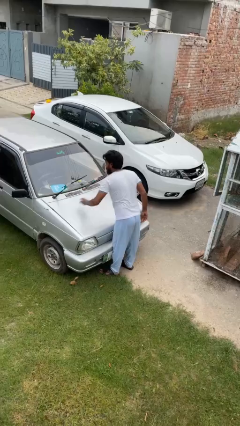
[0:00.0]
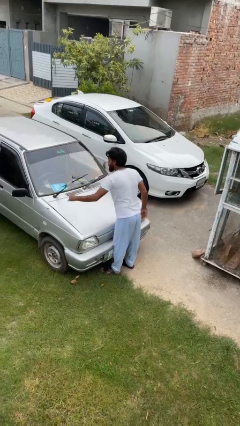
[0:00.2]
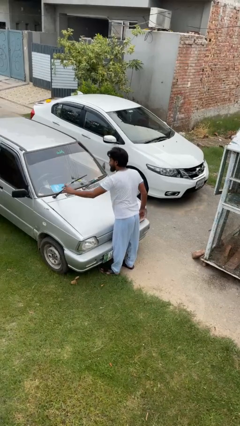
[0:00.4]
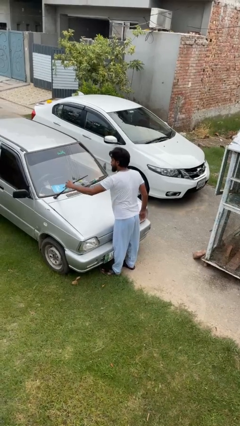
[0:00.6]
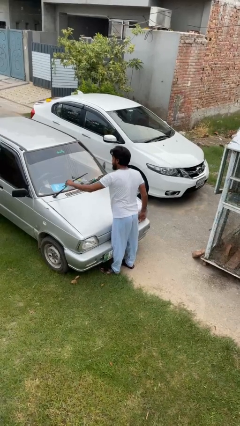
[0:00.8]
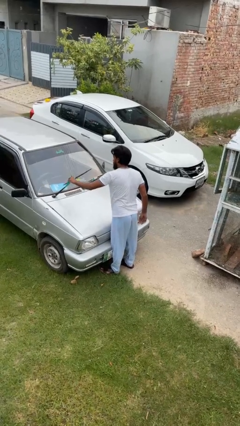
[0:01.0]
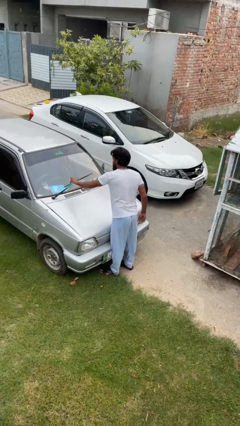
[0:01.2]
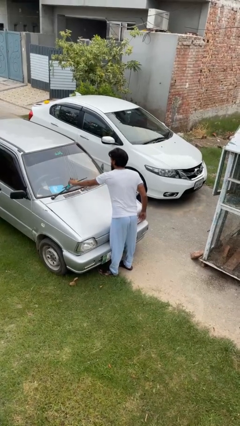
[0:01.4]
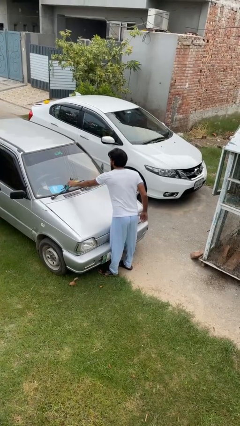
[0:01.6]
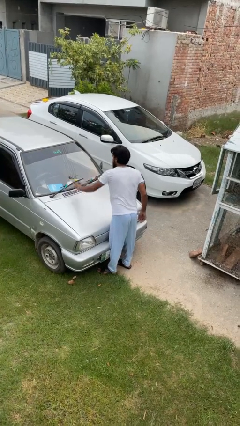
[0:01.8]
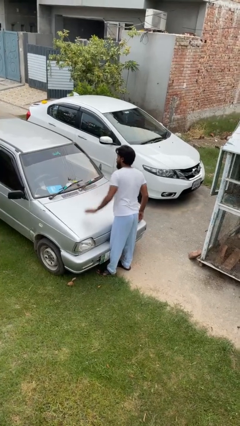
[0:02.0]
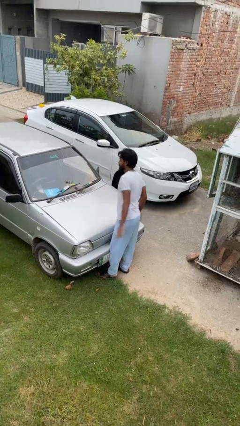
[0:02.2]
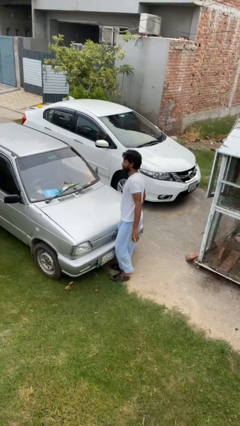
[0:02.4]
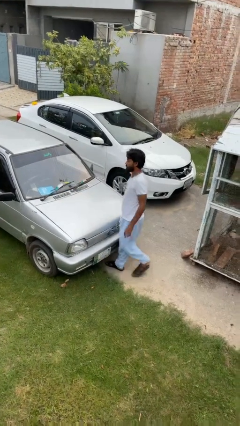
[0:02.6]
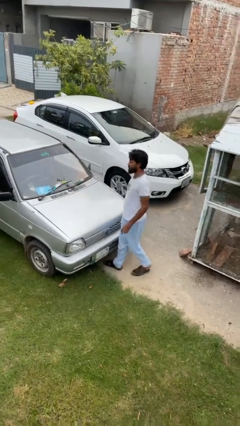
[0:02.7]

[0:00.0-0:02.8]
person flips down car wipers

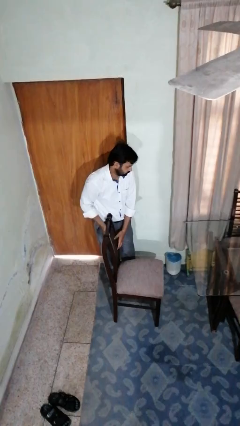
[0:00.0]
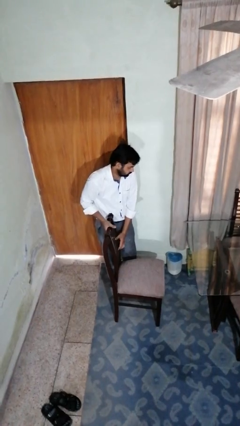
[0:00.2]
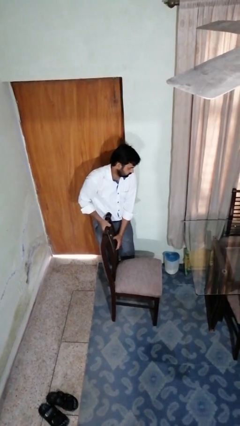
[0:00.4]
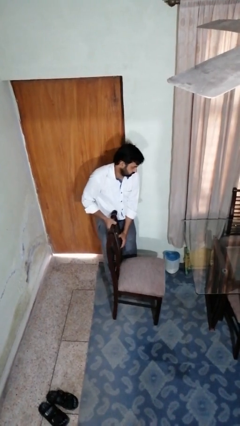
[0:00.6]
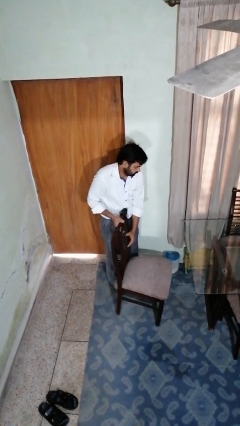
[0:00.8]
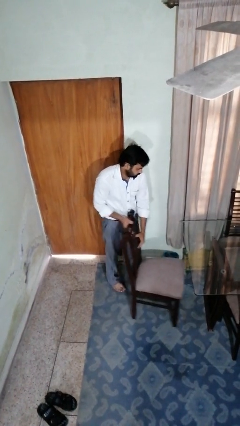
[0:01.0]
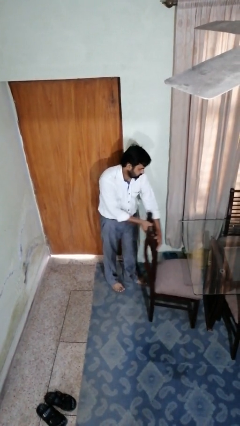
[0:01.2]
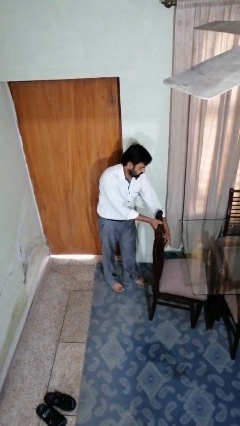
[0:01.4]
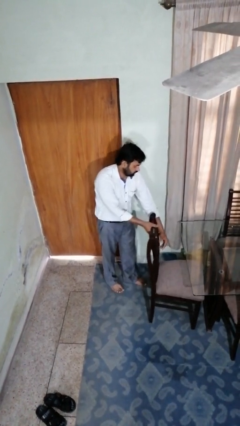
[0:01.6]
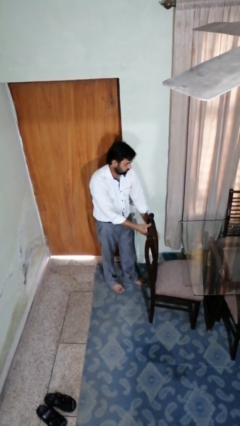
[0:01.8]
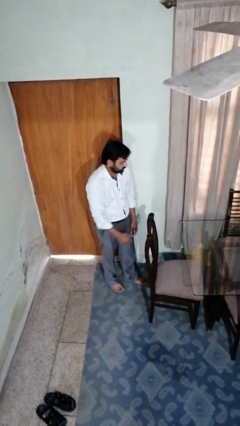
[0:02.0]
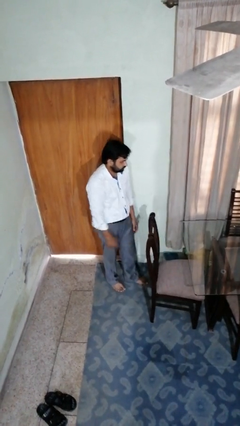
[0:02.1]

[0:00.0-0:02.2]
person pushes in chair

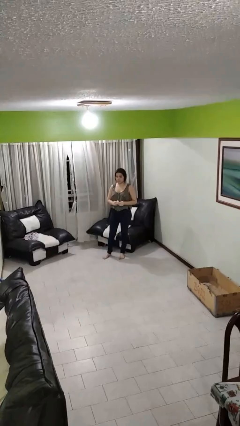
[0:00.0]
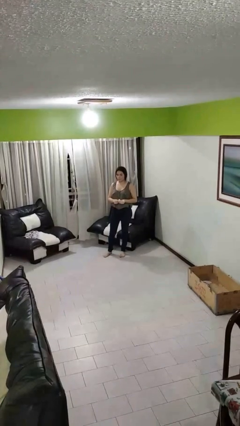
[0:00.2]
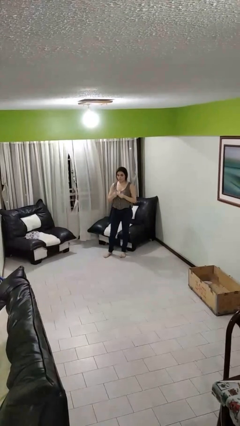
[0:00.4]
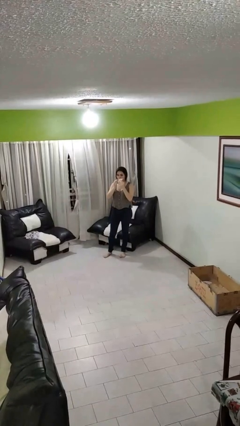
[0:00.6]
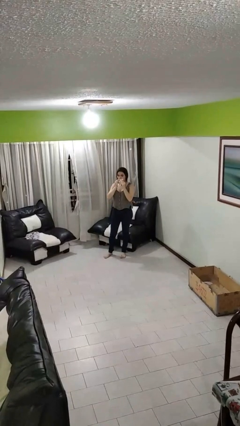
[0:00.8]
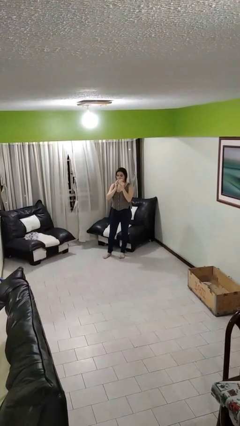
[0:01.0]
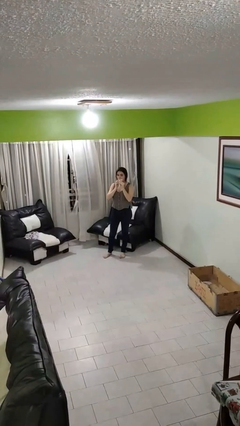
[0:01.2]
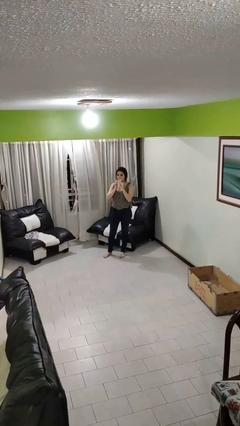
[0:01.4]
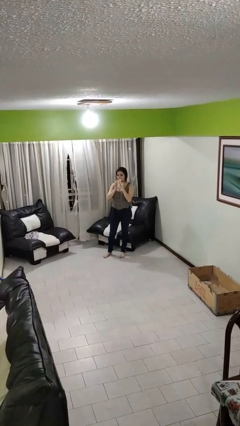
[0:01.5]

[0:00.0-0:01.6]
person wipes mouth with napkin

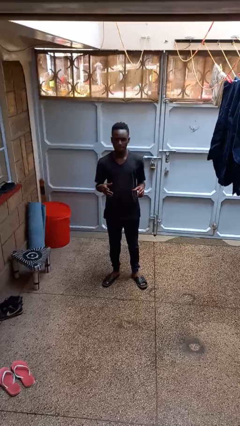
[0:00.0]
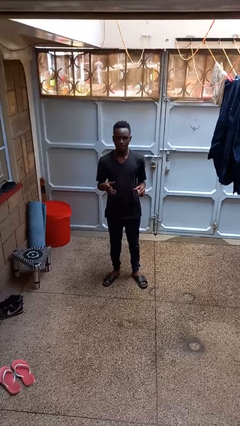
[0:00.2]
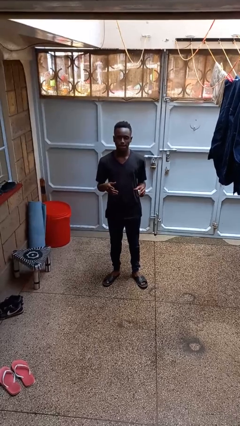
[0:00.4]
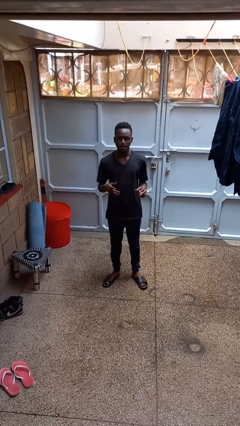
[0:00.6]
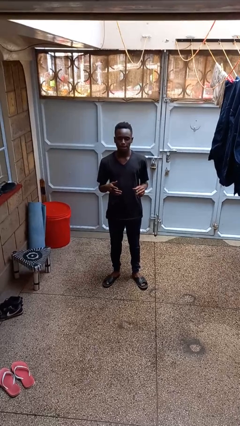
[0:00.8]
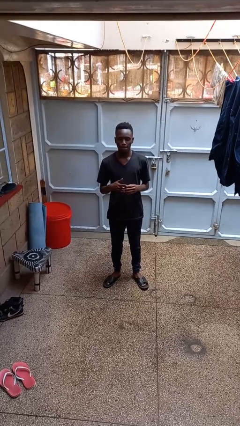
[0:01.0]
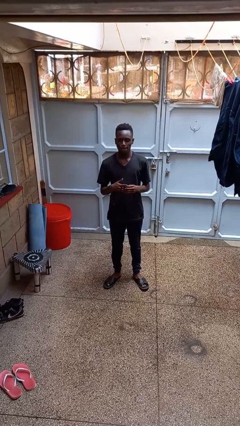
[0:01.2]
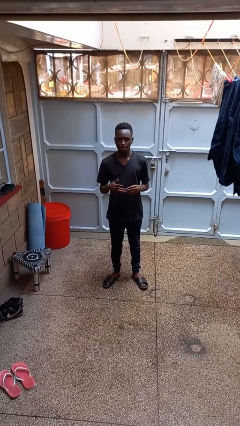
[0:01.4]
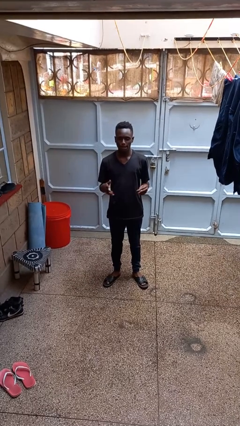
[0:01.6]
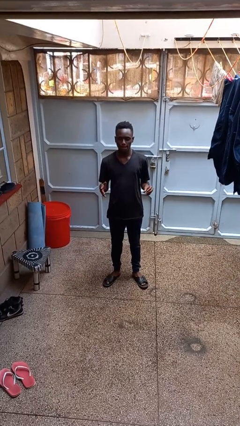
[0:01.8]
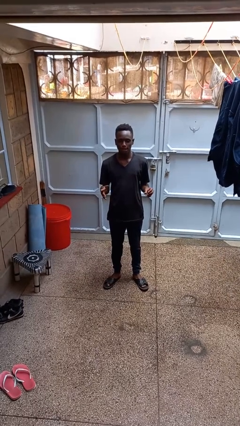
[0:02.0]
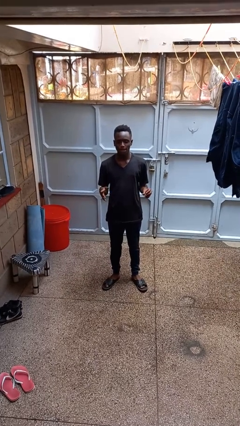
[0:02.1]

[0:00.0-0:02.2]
person takes off ring

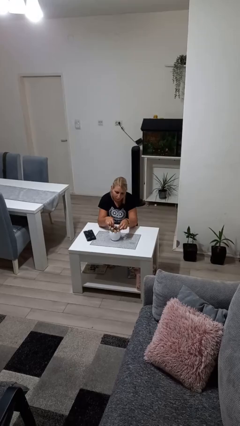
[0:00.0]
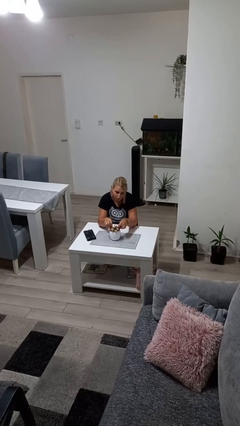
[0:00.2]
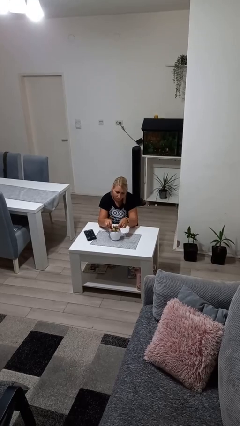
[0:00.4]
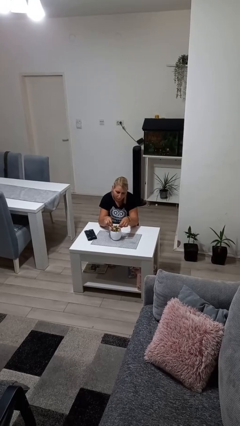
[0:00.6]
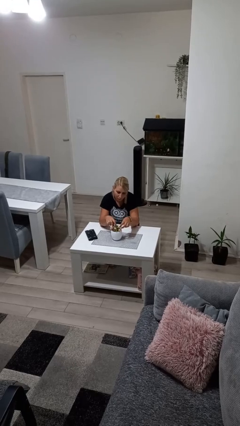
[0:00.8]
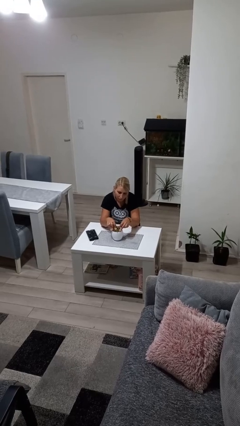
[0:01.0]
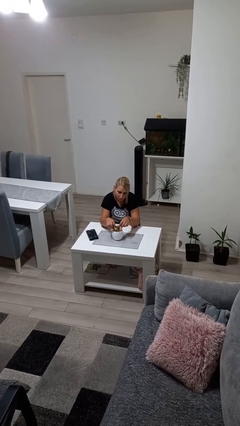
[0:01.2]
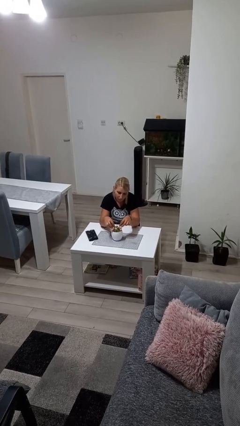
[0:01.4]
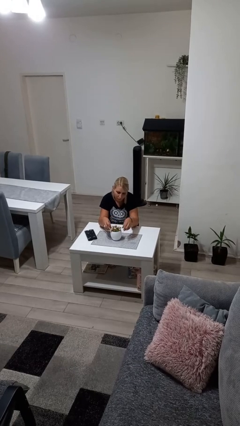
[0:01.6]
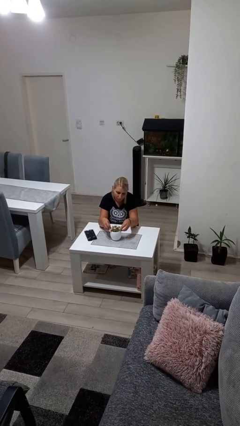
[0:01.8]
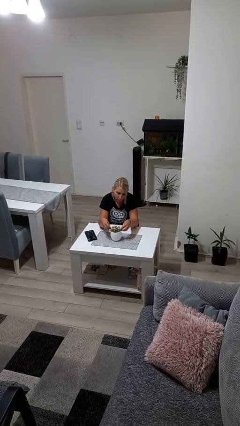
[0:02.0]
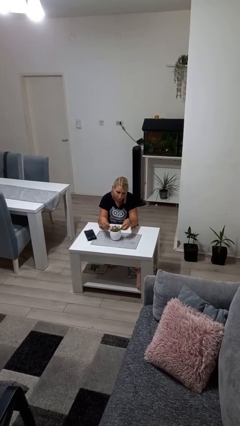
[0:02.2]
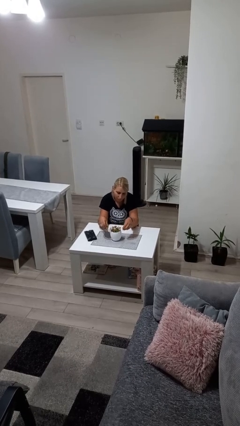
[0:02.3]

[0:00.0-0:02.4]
person arranges flowers in vase

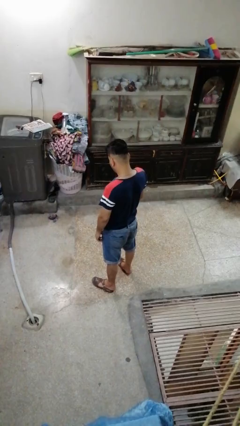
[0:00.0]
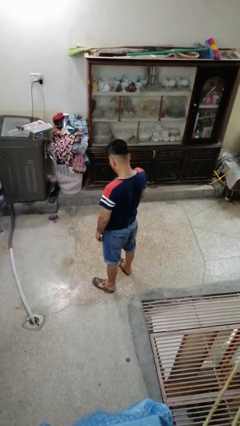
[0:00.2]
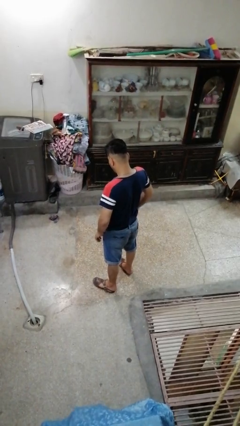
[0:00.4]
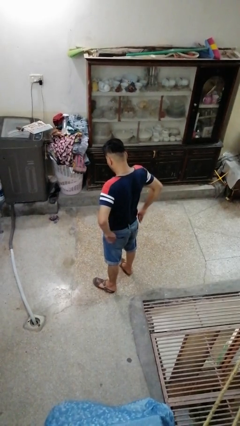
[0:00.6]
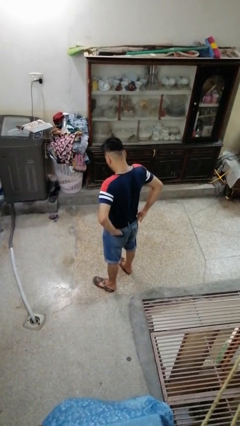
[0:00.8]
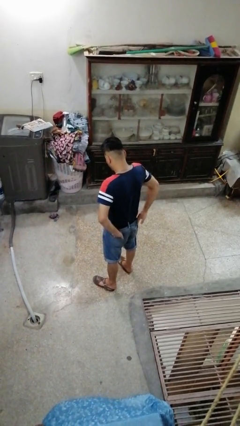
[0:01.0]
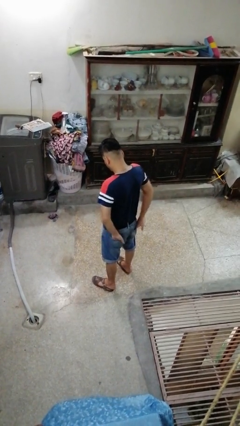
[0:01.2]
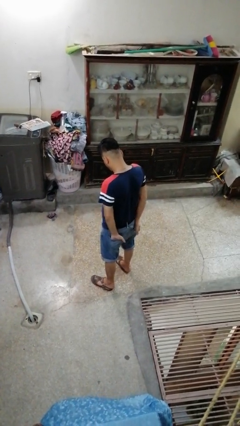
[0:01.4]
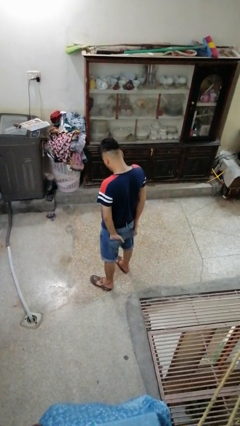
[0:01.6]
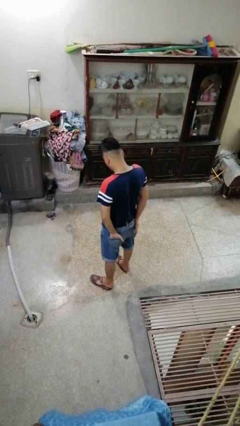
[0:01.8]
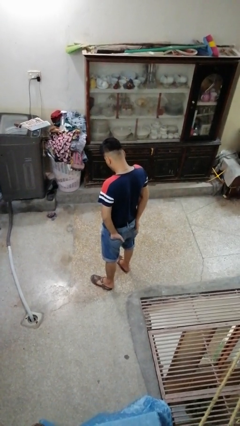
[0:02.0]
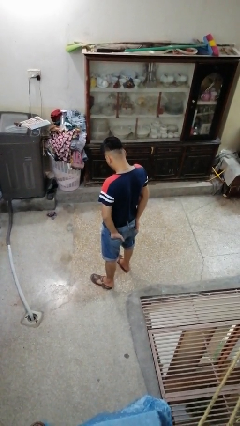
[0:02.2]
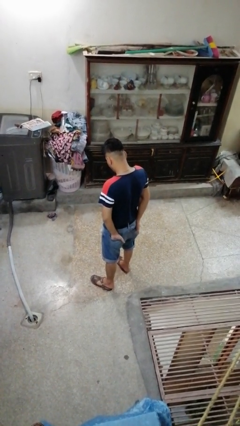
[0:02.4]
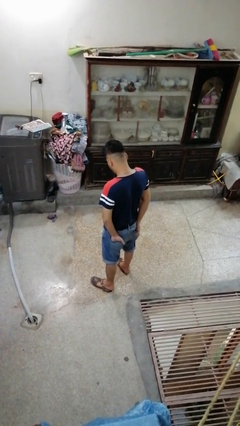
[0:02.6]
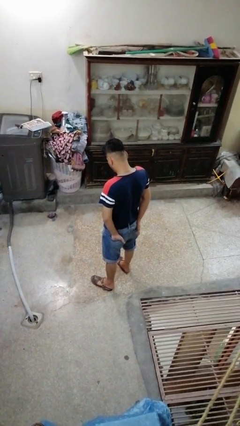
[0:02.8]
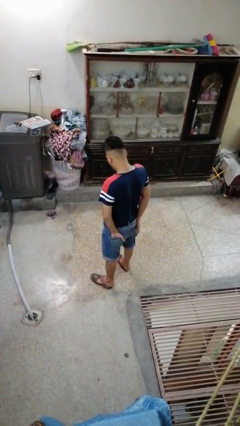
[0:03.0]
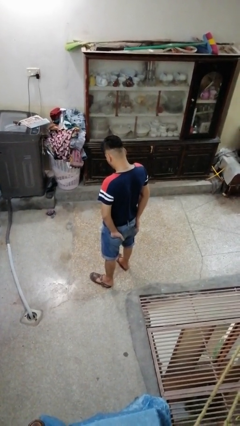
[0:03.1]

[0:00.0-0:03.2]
person puts hands in back pockets

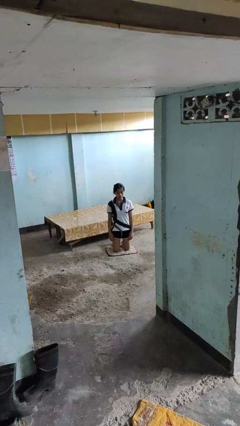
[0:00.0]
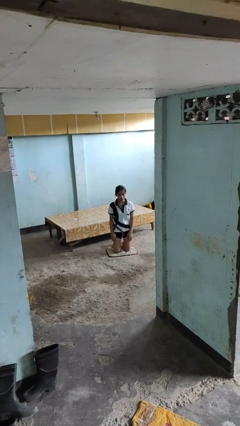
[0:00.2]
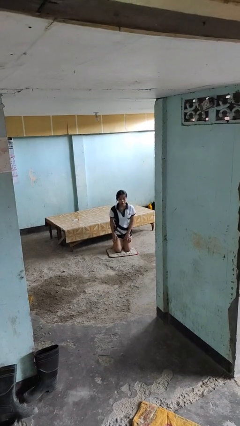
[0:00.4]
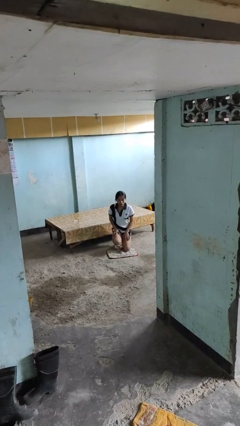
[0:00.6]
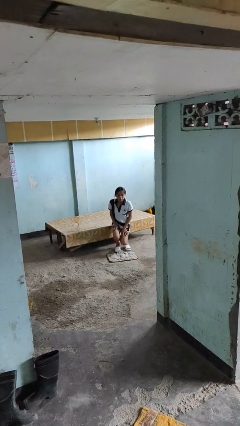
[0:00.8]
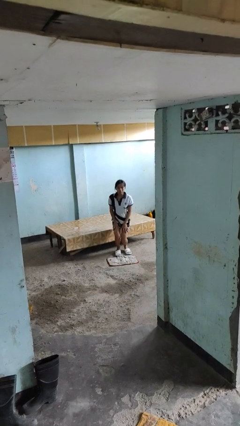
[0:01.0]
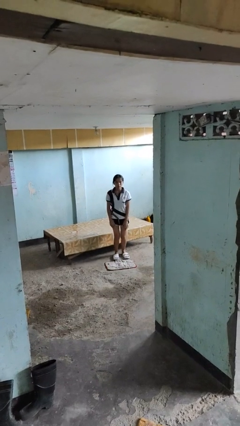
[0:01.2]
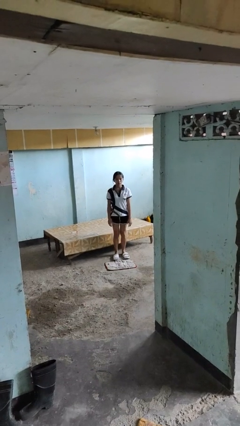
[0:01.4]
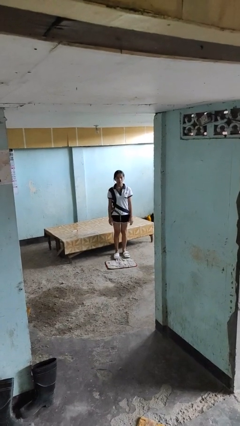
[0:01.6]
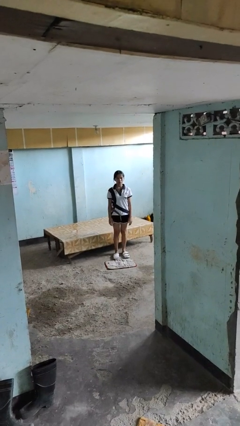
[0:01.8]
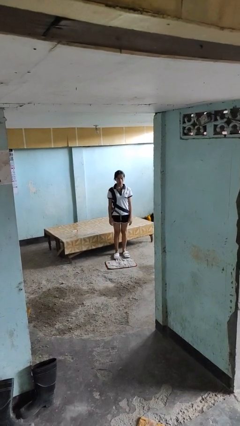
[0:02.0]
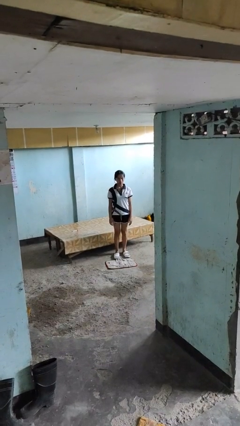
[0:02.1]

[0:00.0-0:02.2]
person stands up from floor

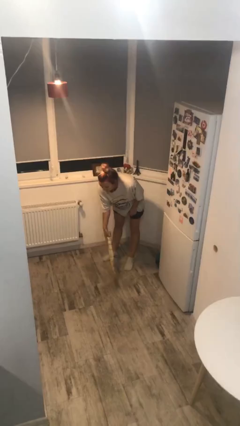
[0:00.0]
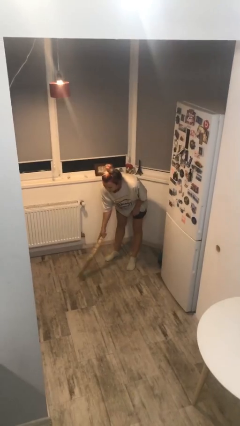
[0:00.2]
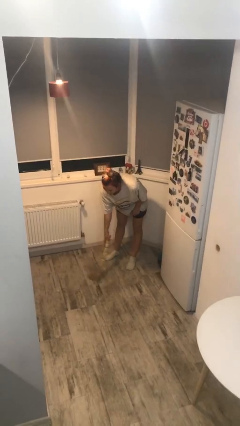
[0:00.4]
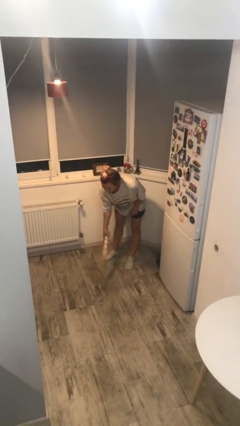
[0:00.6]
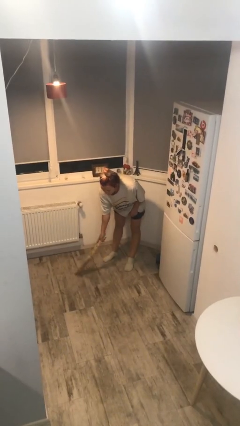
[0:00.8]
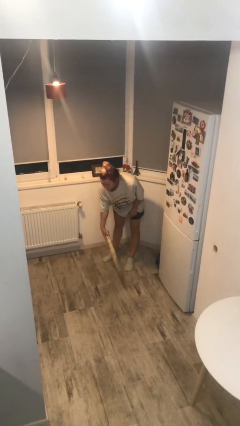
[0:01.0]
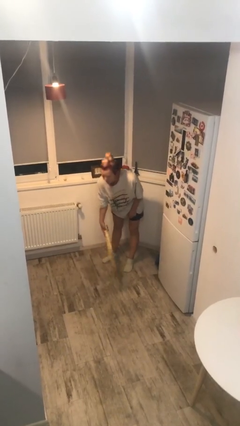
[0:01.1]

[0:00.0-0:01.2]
person sweeps floor
